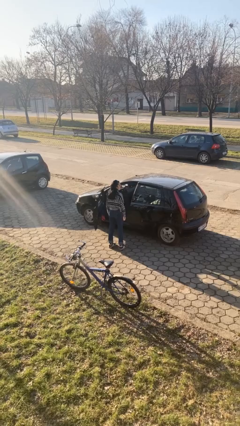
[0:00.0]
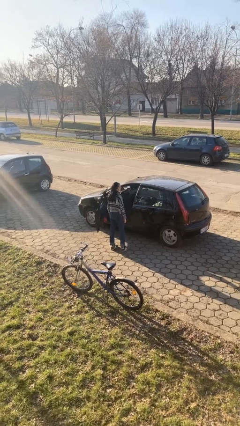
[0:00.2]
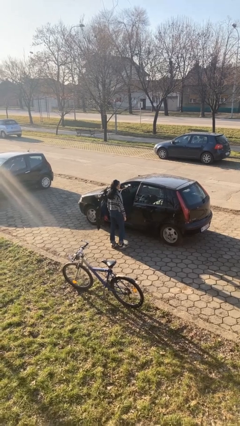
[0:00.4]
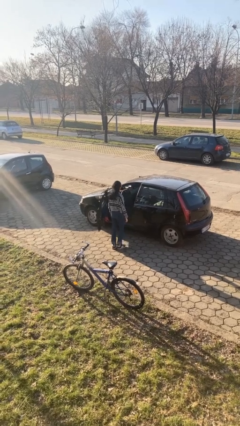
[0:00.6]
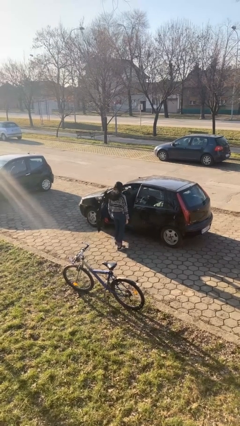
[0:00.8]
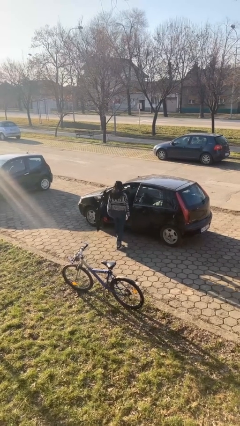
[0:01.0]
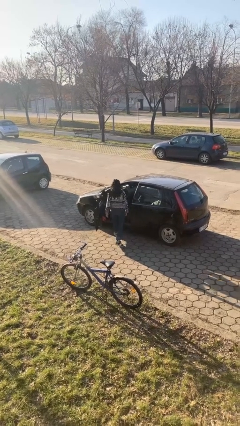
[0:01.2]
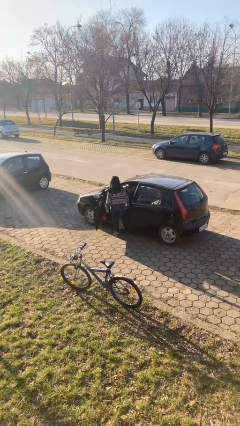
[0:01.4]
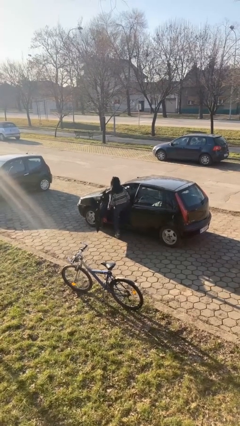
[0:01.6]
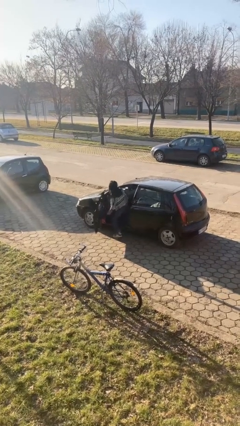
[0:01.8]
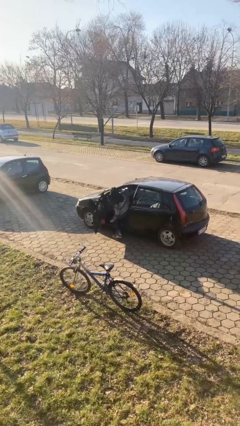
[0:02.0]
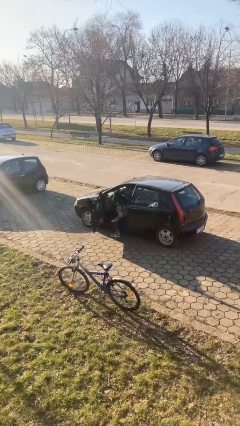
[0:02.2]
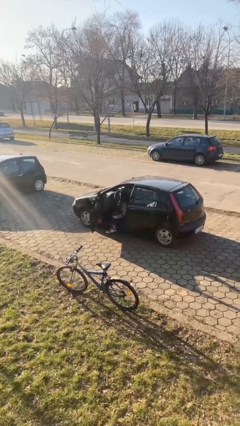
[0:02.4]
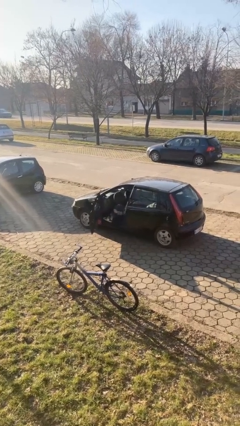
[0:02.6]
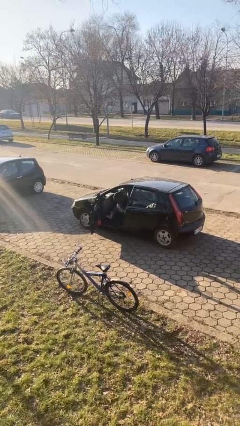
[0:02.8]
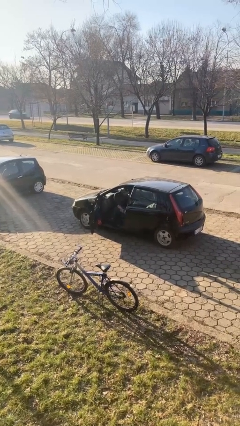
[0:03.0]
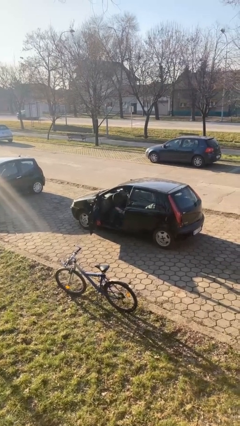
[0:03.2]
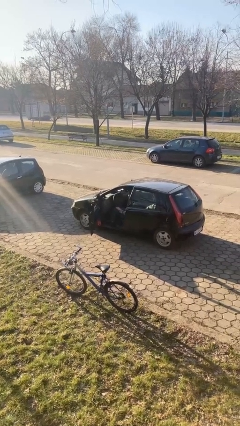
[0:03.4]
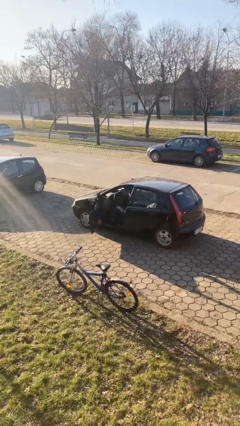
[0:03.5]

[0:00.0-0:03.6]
person enters car

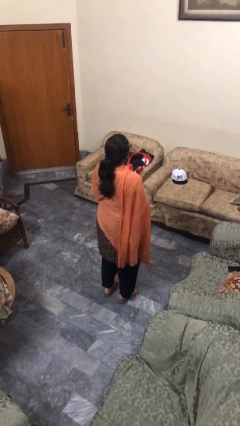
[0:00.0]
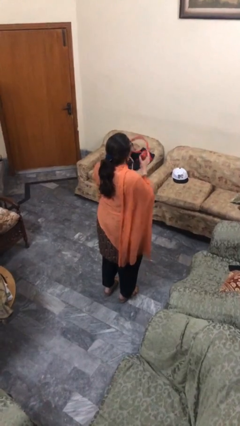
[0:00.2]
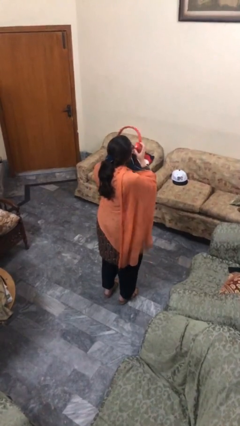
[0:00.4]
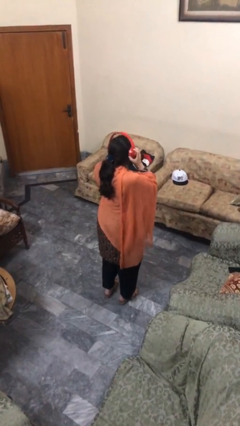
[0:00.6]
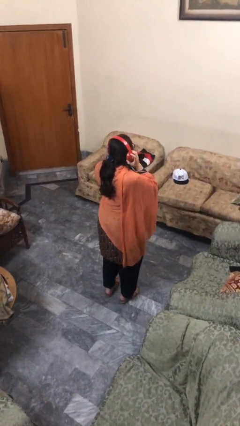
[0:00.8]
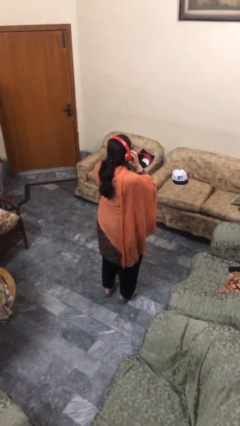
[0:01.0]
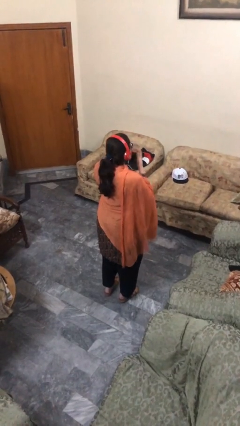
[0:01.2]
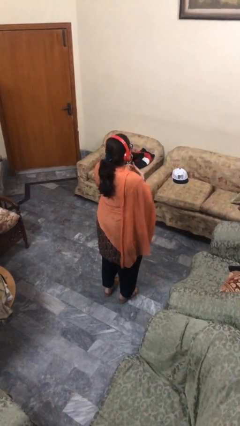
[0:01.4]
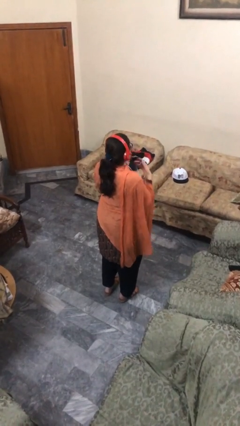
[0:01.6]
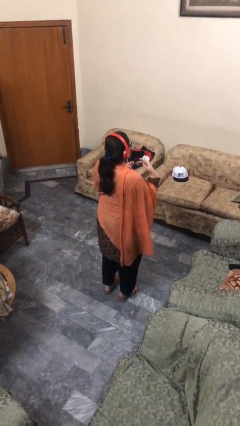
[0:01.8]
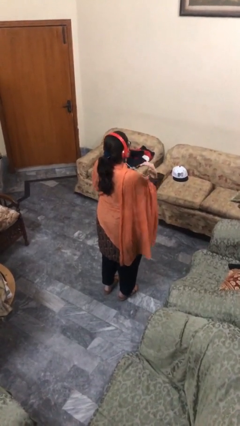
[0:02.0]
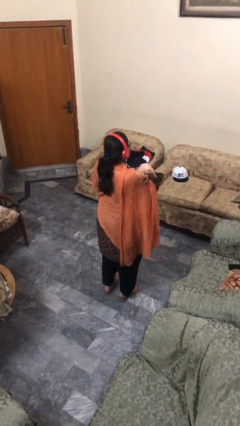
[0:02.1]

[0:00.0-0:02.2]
person puts on headphones

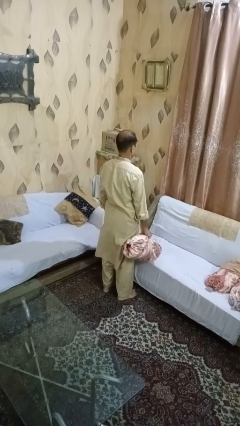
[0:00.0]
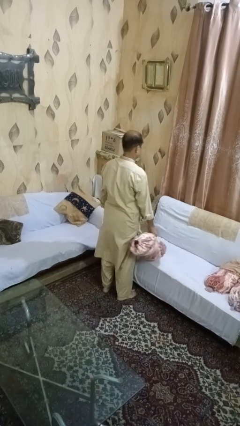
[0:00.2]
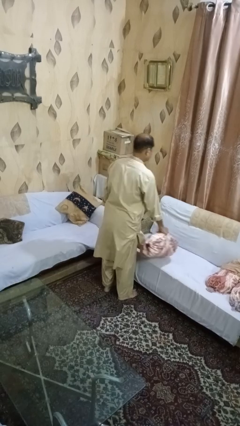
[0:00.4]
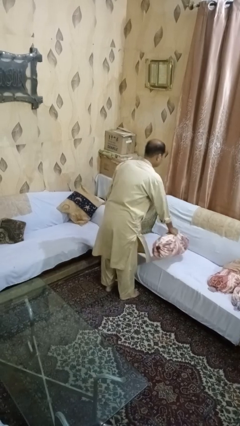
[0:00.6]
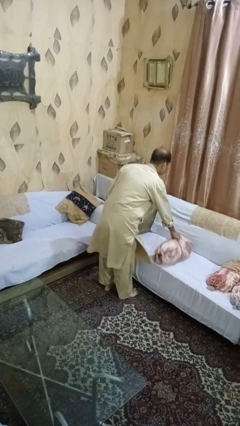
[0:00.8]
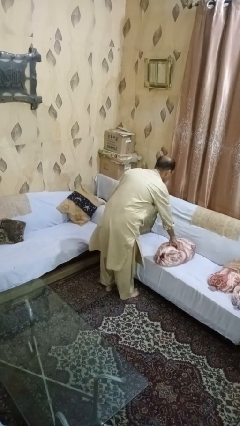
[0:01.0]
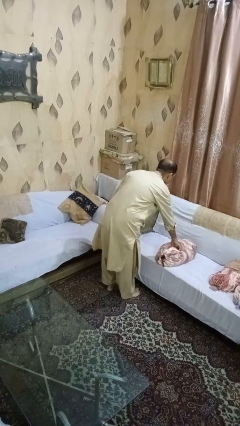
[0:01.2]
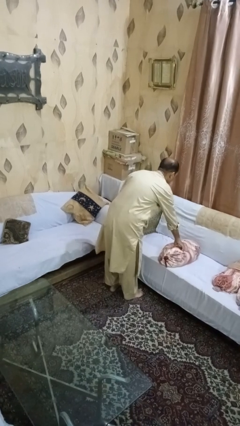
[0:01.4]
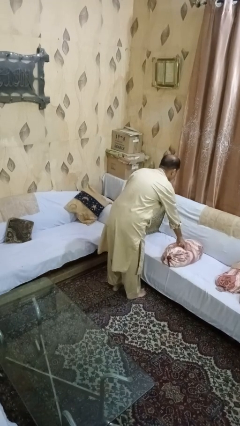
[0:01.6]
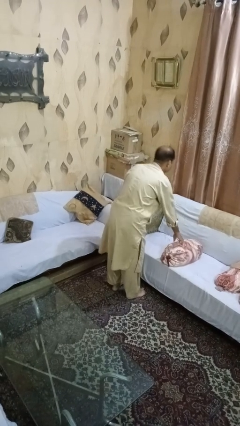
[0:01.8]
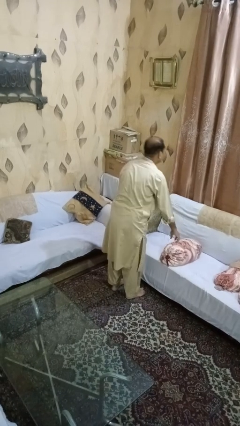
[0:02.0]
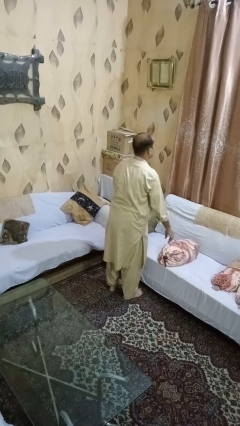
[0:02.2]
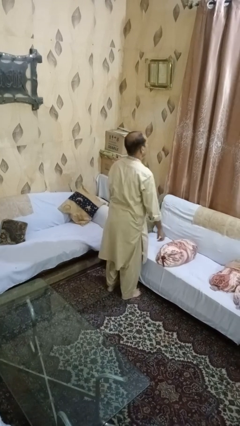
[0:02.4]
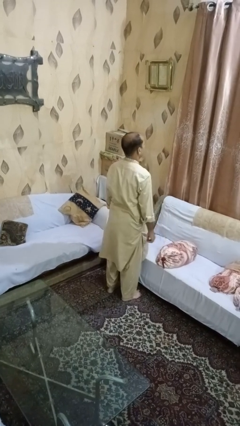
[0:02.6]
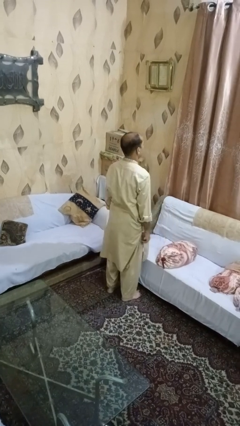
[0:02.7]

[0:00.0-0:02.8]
person puts down object on couch

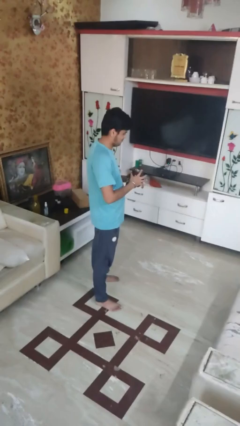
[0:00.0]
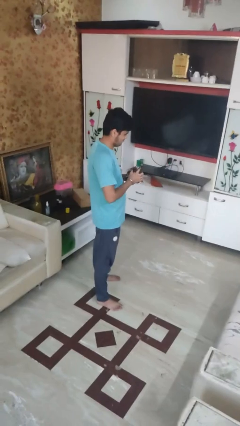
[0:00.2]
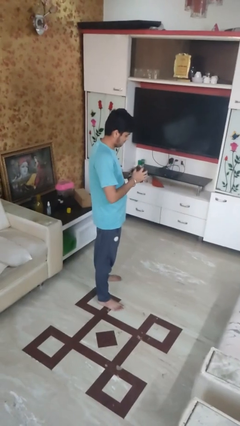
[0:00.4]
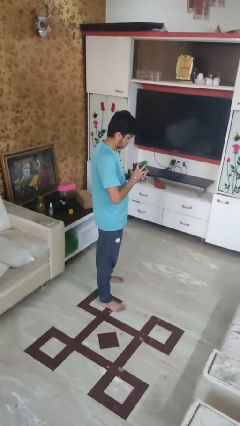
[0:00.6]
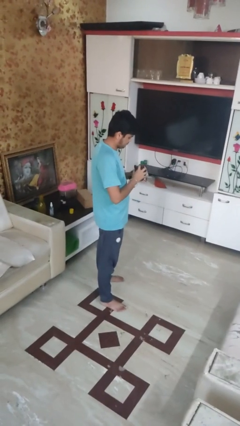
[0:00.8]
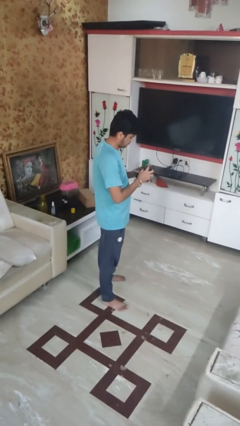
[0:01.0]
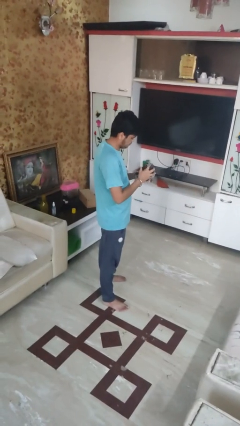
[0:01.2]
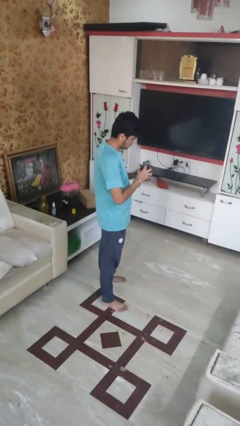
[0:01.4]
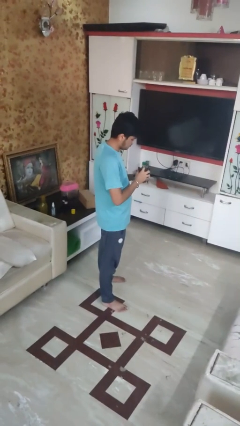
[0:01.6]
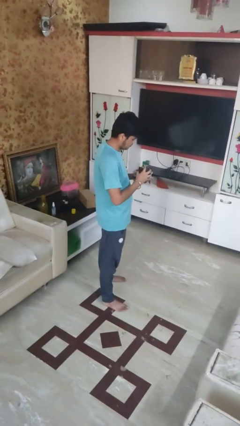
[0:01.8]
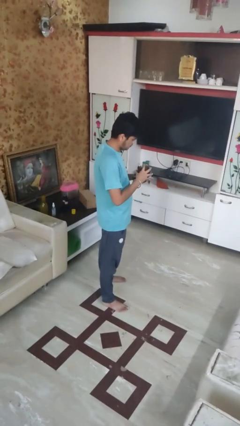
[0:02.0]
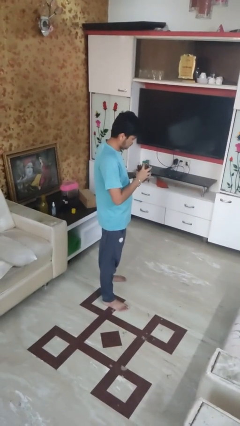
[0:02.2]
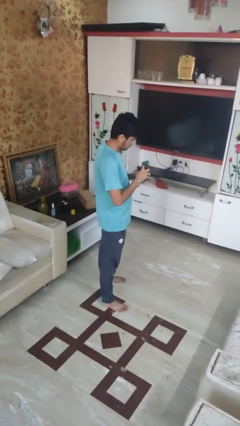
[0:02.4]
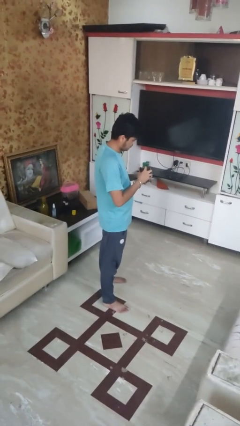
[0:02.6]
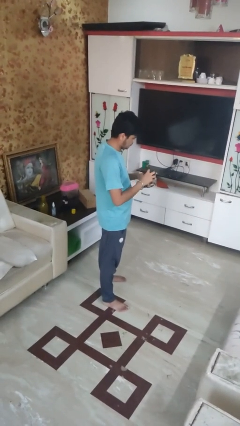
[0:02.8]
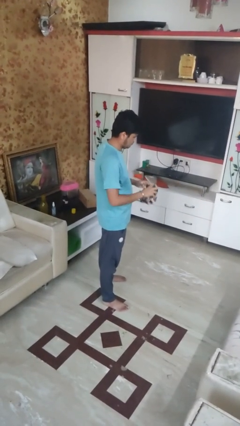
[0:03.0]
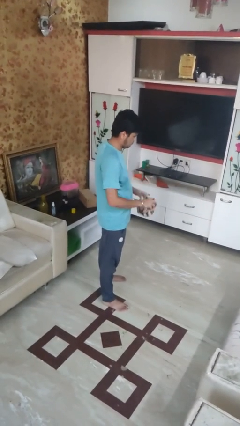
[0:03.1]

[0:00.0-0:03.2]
person squeezes object

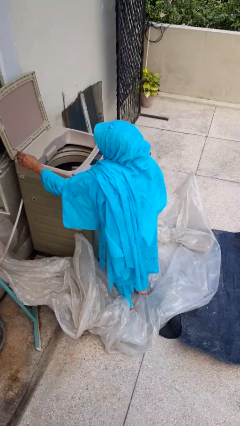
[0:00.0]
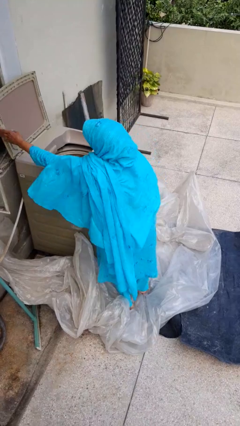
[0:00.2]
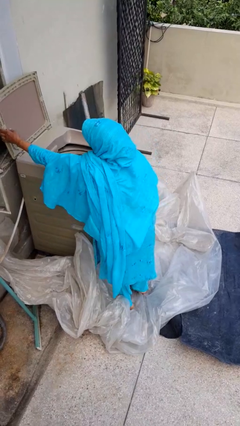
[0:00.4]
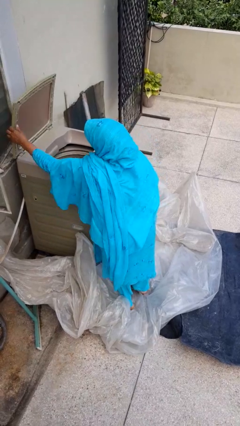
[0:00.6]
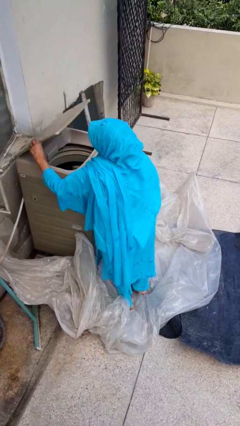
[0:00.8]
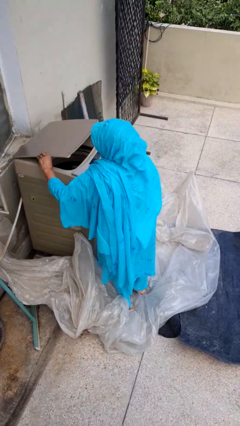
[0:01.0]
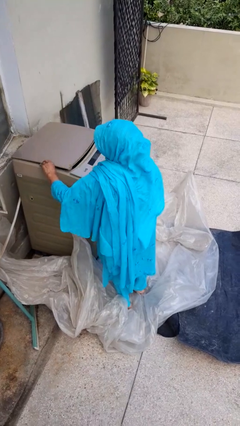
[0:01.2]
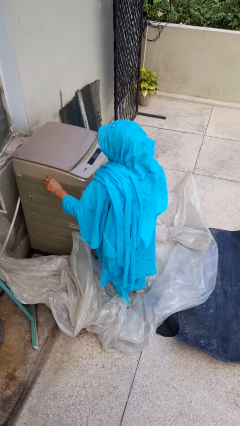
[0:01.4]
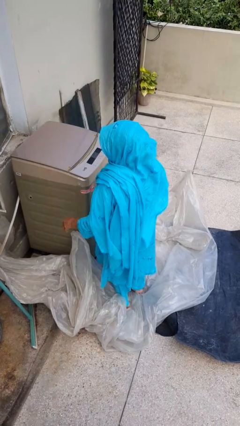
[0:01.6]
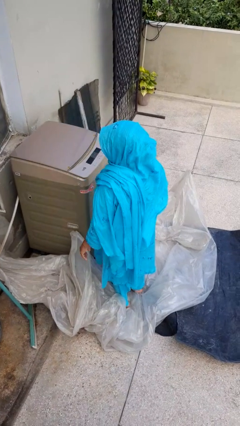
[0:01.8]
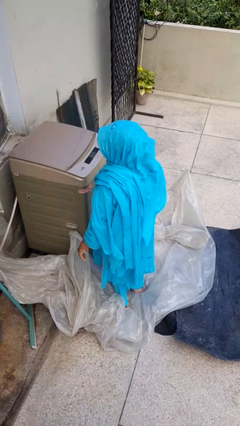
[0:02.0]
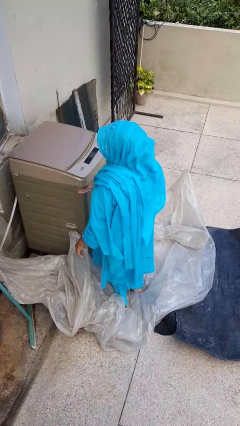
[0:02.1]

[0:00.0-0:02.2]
person closes clothes washer

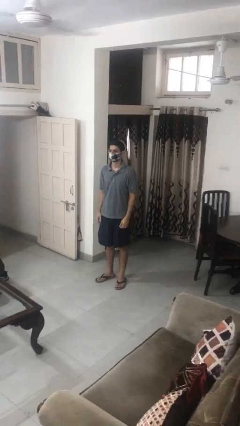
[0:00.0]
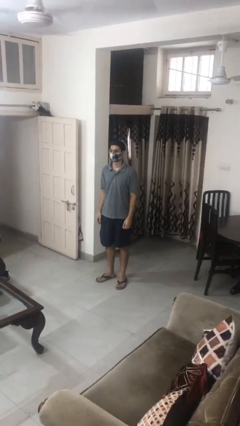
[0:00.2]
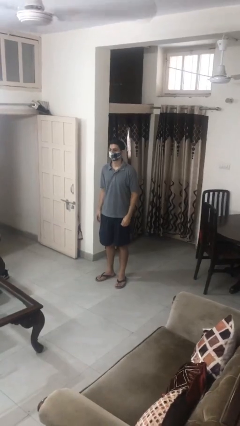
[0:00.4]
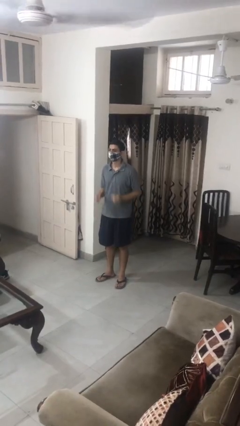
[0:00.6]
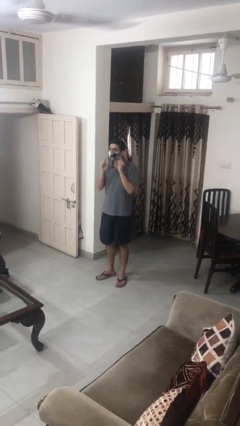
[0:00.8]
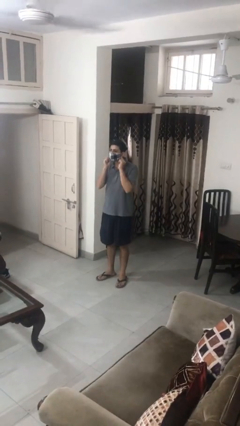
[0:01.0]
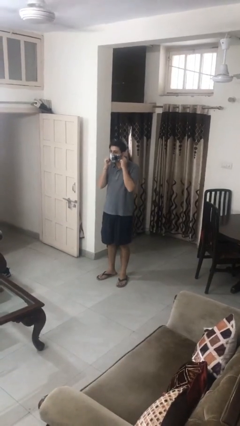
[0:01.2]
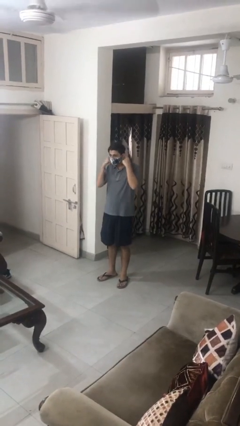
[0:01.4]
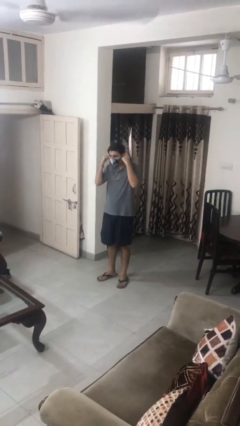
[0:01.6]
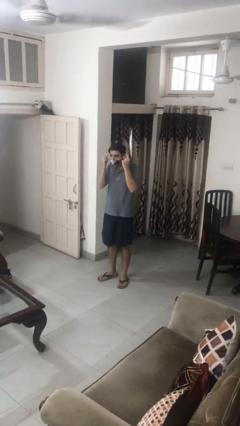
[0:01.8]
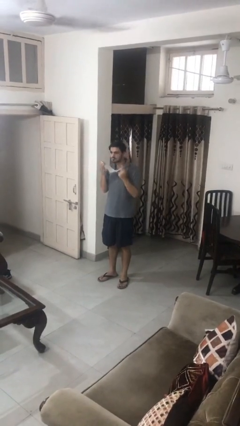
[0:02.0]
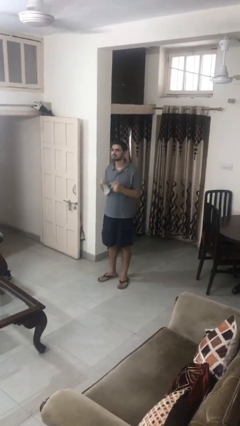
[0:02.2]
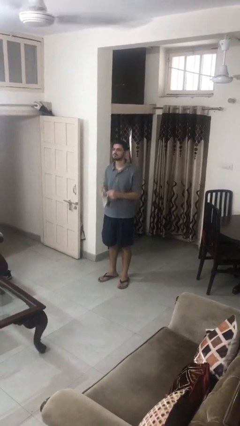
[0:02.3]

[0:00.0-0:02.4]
person takes off facemask

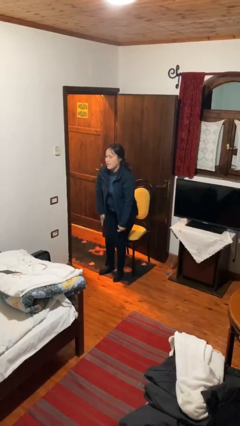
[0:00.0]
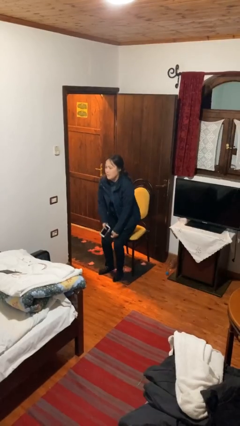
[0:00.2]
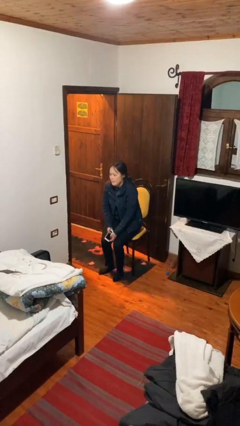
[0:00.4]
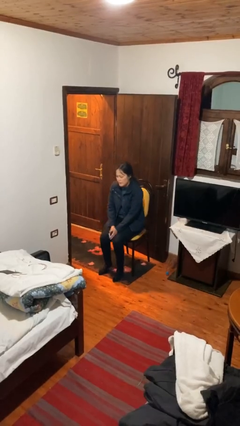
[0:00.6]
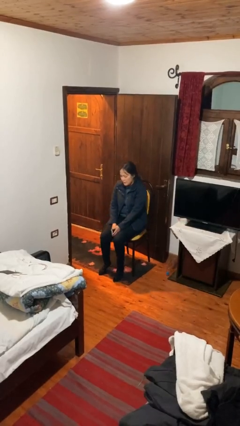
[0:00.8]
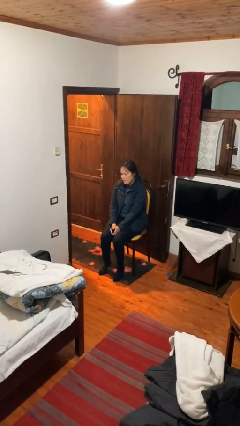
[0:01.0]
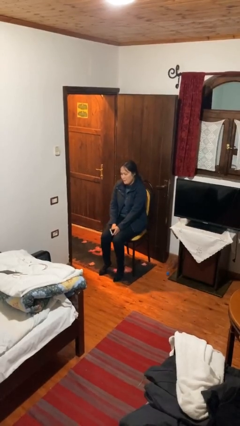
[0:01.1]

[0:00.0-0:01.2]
person sits down
